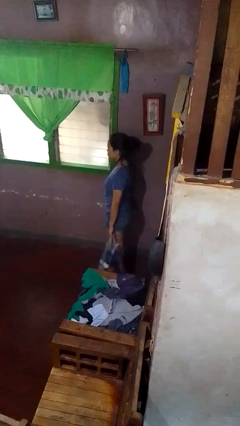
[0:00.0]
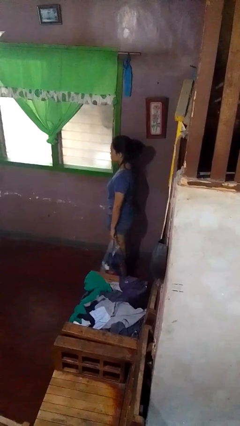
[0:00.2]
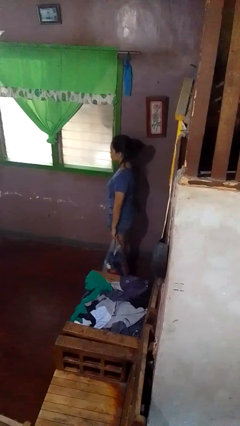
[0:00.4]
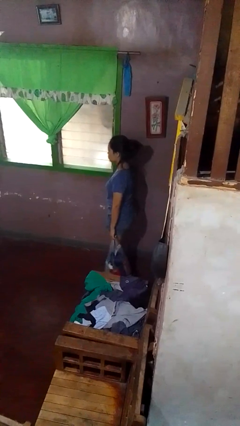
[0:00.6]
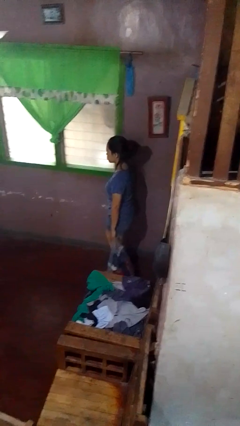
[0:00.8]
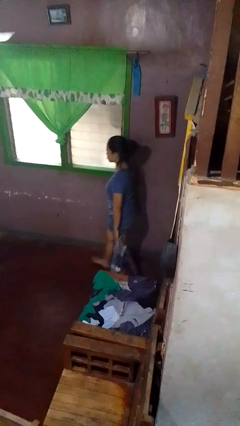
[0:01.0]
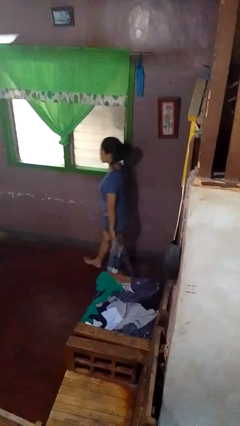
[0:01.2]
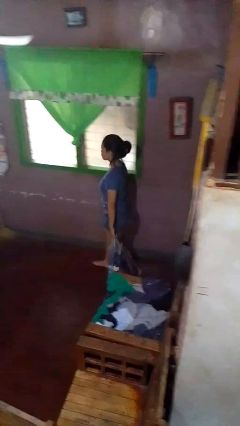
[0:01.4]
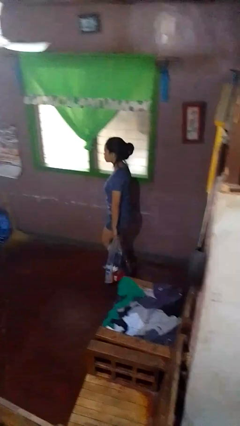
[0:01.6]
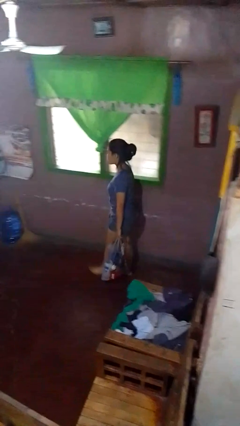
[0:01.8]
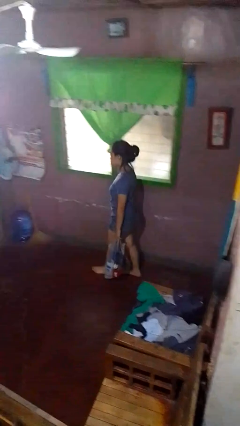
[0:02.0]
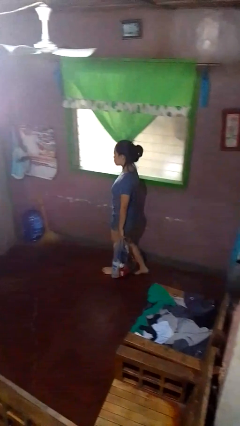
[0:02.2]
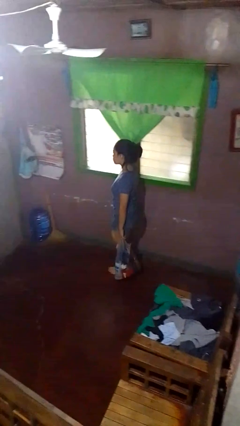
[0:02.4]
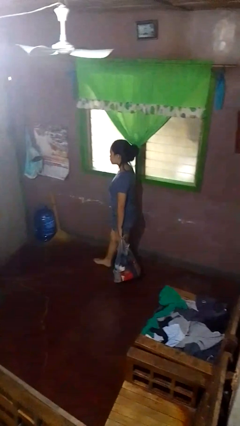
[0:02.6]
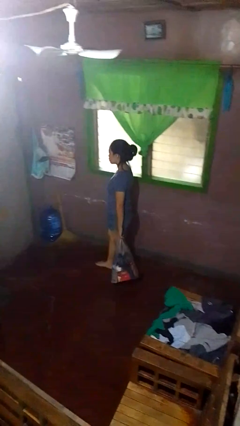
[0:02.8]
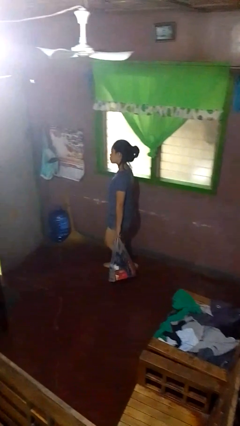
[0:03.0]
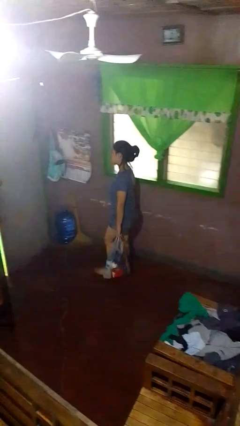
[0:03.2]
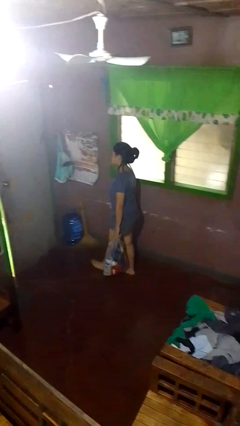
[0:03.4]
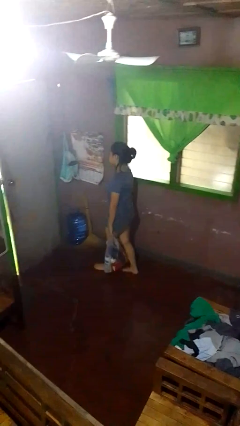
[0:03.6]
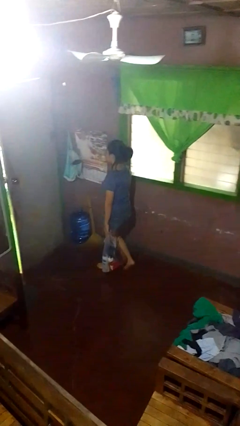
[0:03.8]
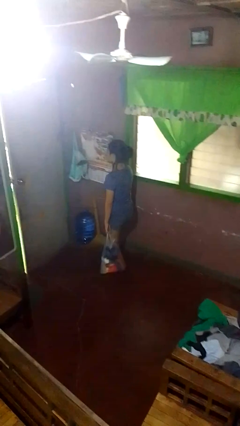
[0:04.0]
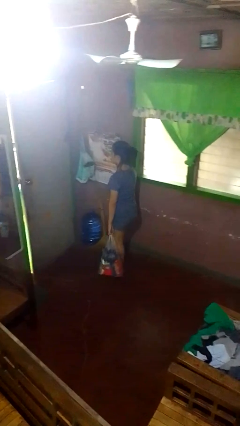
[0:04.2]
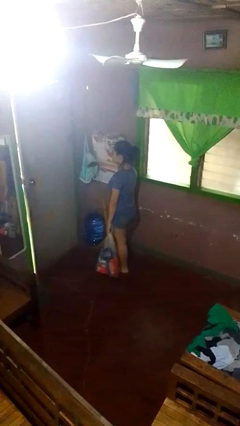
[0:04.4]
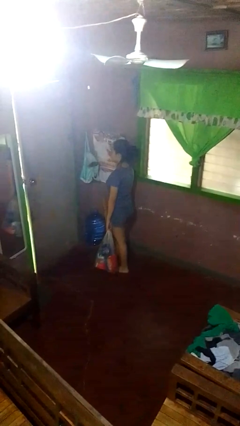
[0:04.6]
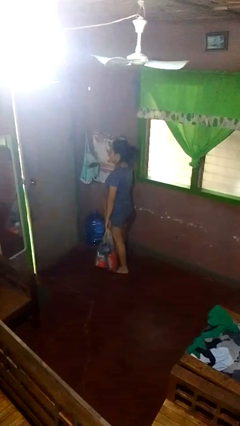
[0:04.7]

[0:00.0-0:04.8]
person carries groceries

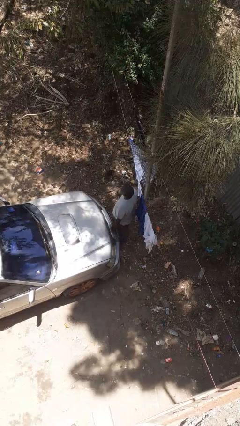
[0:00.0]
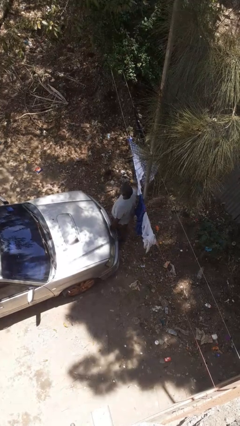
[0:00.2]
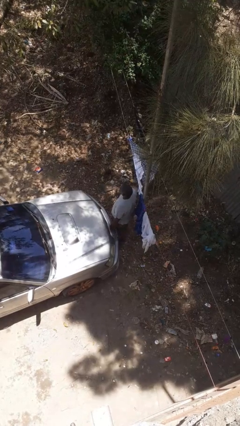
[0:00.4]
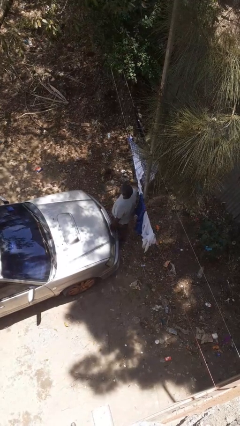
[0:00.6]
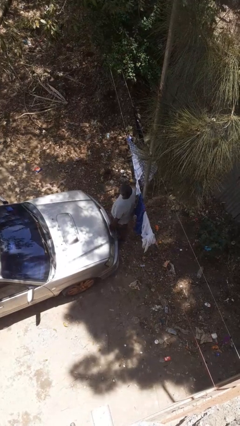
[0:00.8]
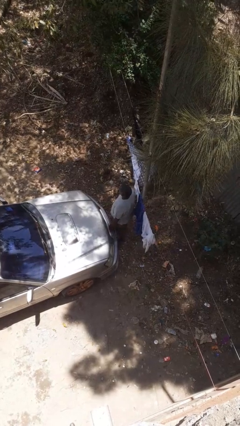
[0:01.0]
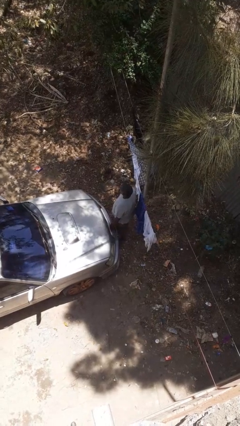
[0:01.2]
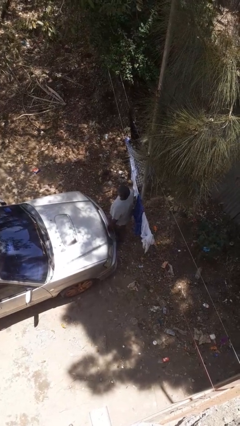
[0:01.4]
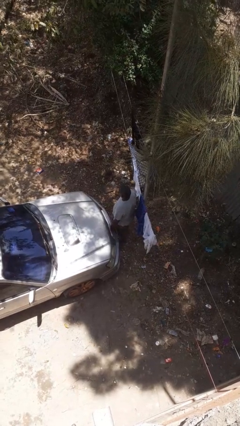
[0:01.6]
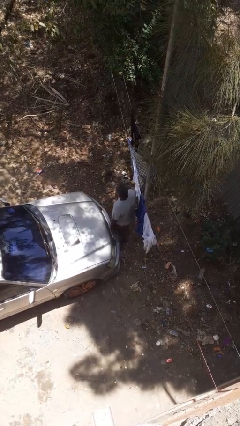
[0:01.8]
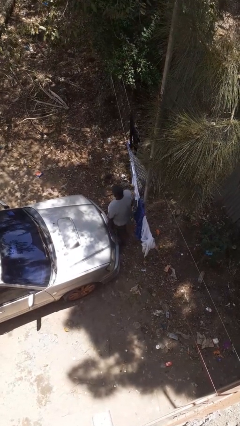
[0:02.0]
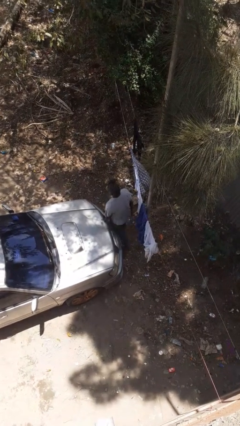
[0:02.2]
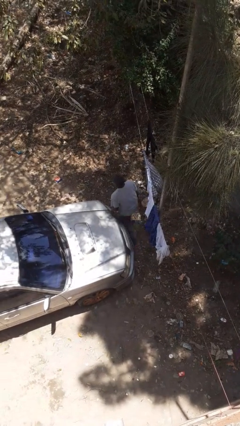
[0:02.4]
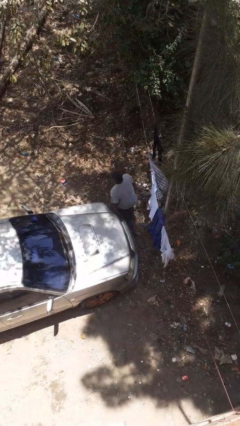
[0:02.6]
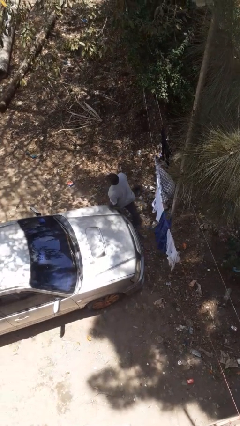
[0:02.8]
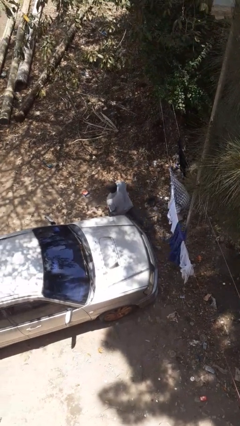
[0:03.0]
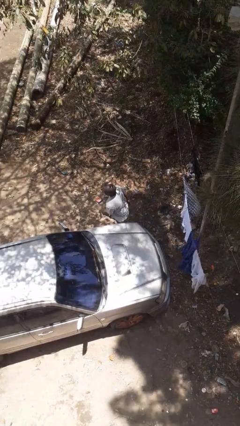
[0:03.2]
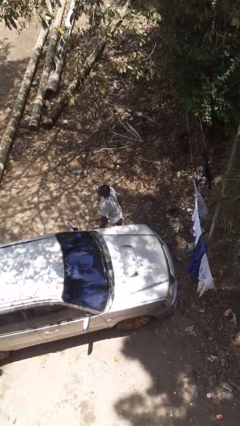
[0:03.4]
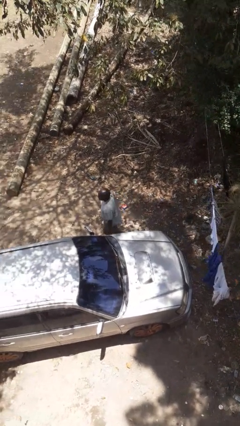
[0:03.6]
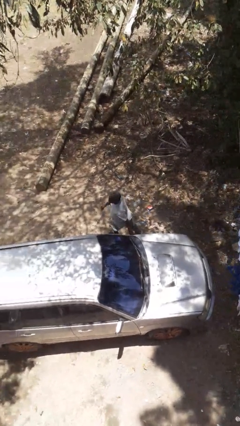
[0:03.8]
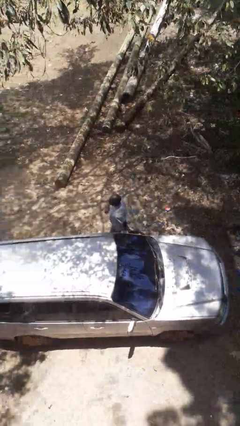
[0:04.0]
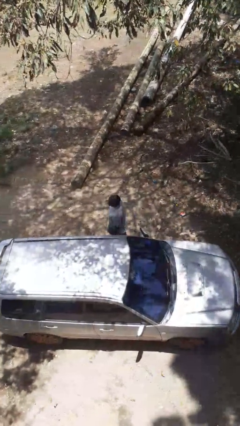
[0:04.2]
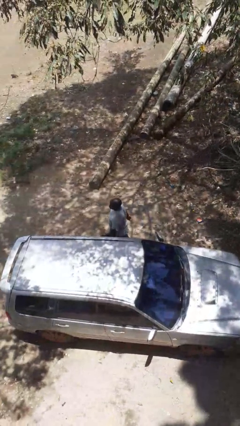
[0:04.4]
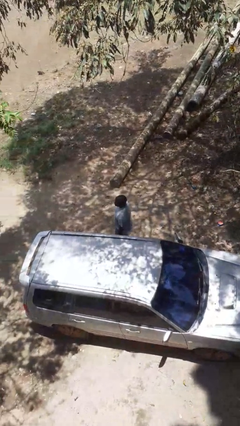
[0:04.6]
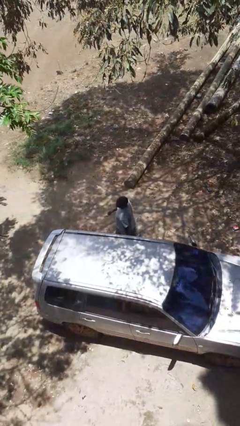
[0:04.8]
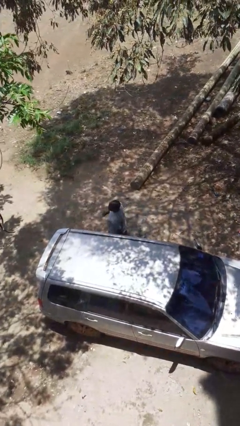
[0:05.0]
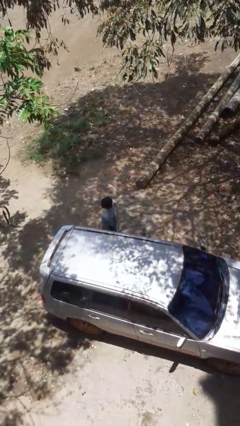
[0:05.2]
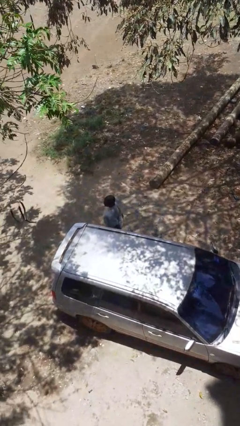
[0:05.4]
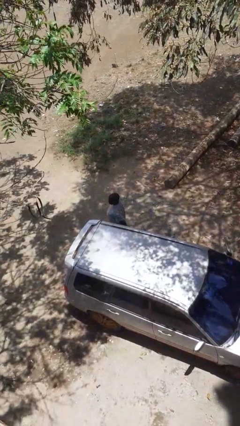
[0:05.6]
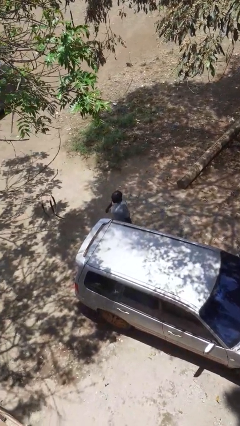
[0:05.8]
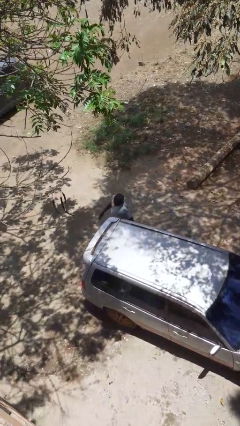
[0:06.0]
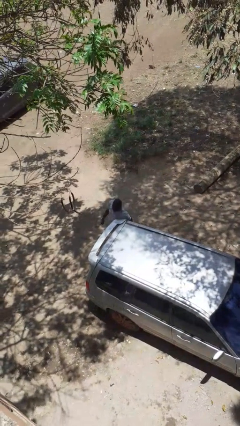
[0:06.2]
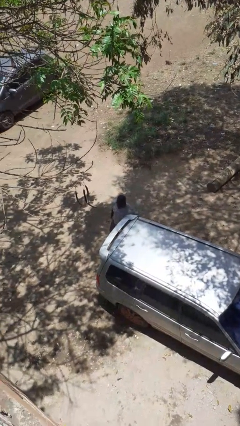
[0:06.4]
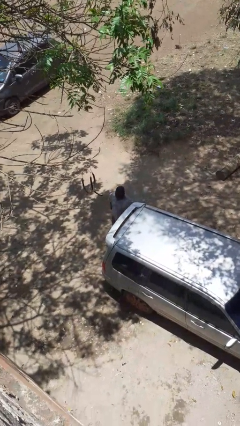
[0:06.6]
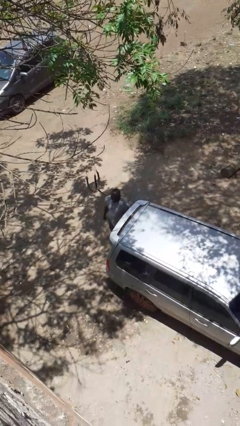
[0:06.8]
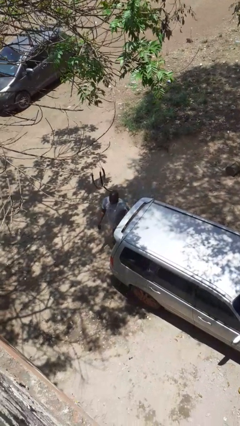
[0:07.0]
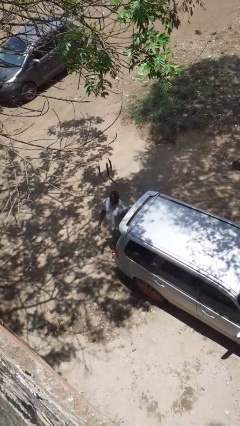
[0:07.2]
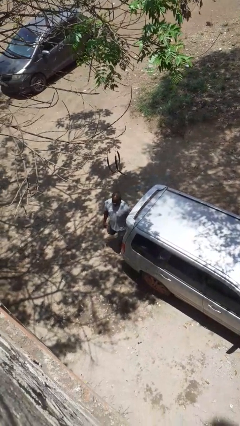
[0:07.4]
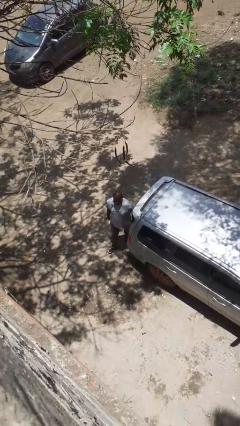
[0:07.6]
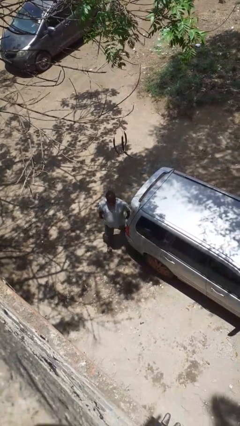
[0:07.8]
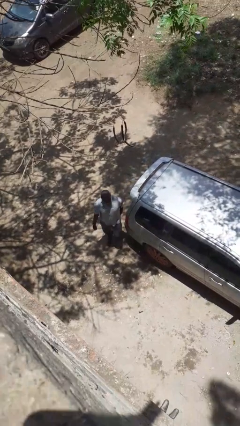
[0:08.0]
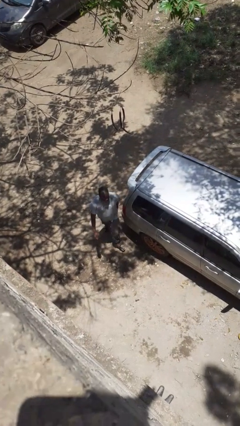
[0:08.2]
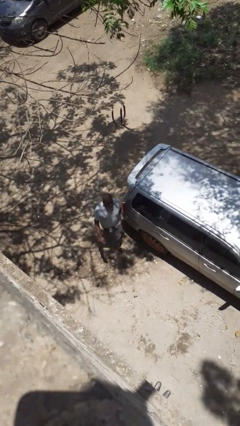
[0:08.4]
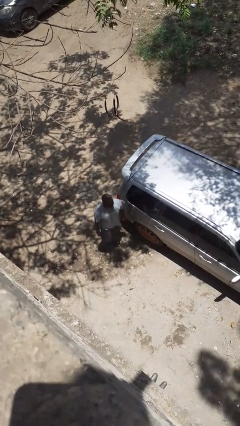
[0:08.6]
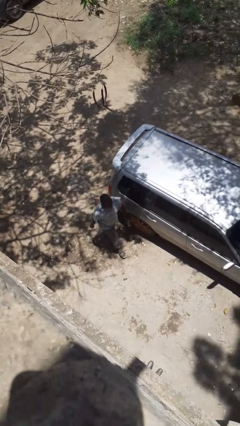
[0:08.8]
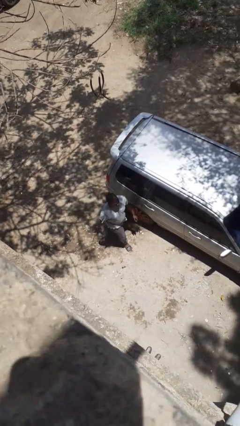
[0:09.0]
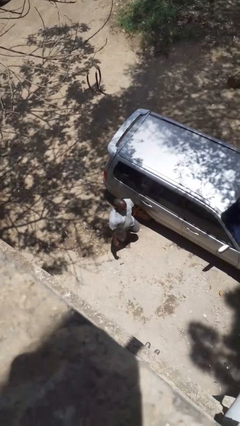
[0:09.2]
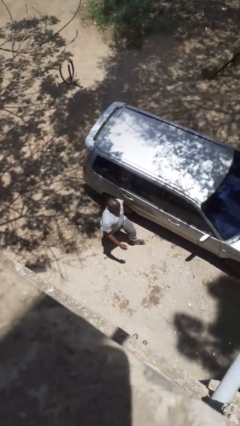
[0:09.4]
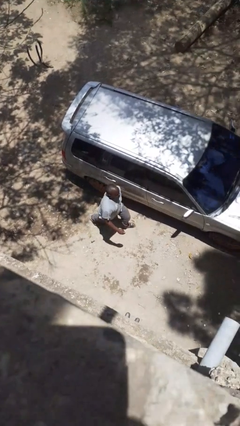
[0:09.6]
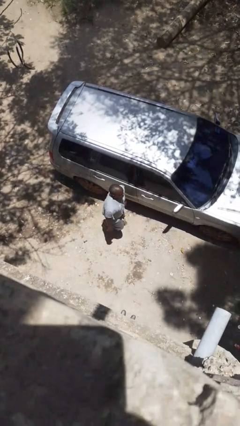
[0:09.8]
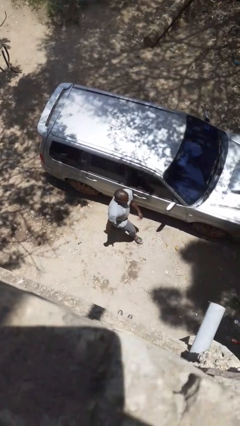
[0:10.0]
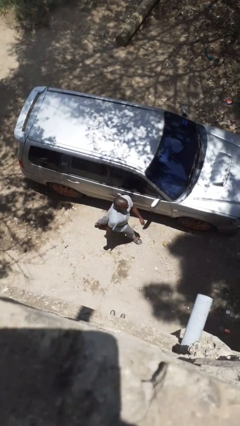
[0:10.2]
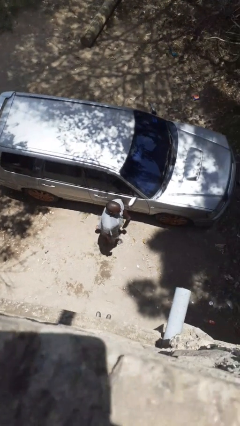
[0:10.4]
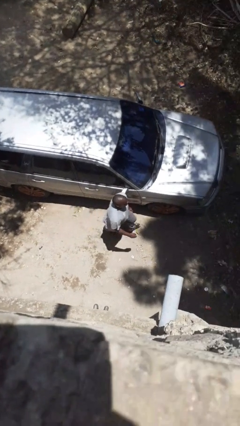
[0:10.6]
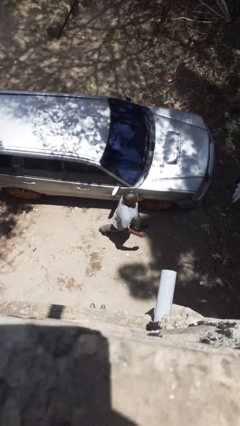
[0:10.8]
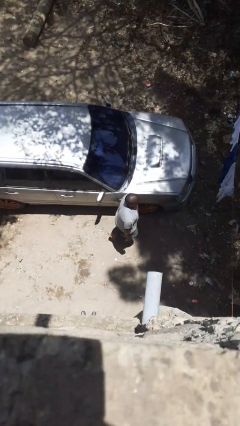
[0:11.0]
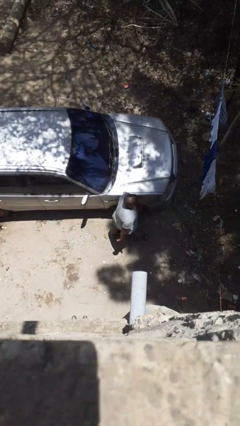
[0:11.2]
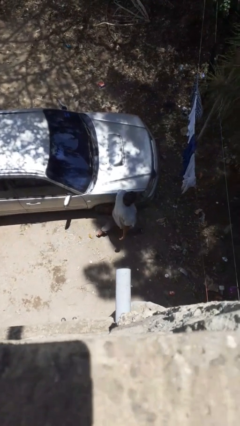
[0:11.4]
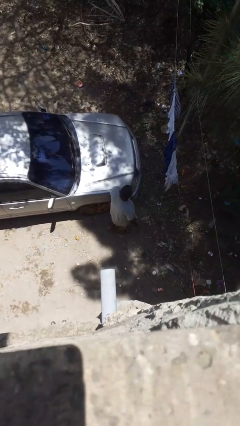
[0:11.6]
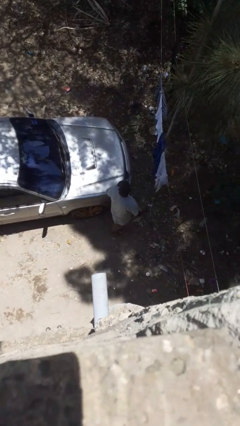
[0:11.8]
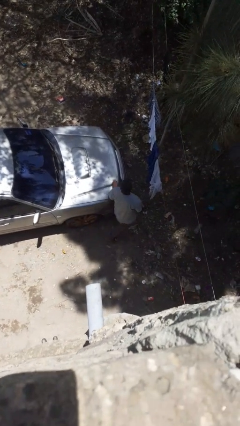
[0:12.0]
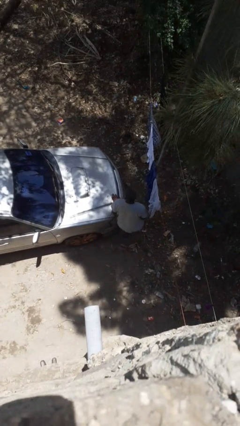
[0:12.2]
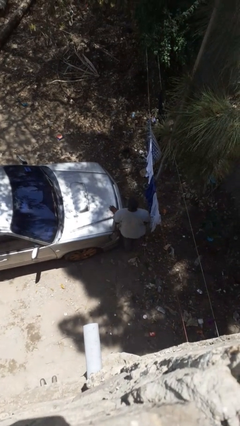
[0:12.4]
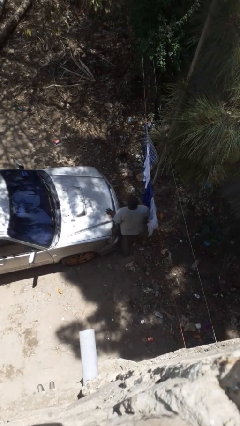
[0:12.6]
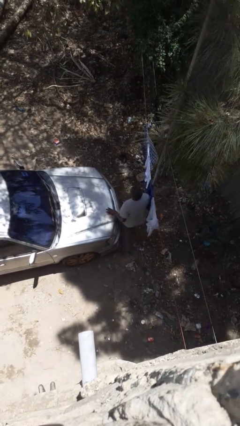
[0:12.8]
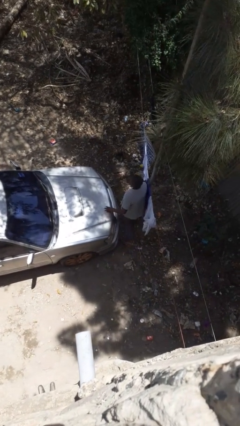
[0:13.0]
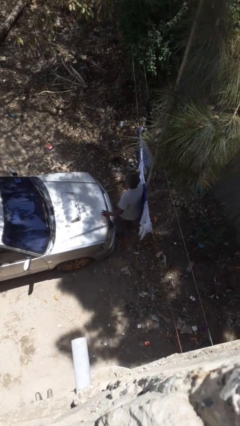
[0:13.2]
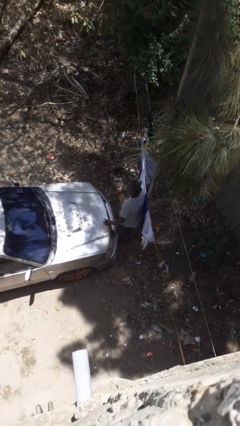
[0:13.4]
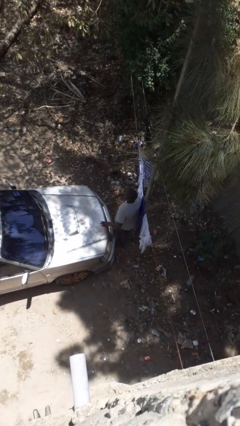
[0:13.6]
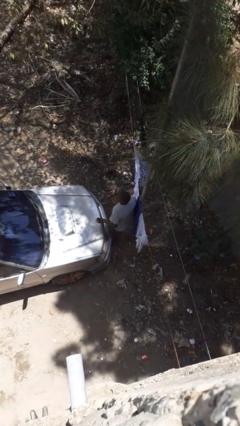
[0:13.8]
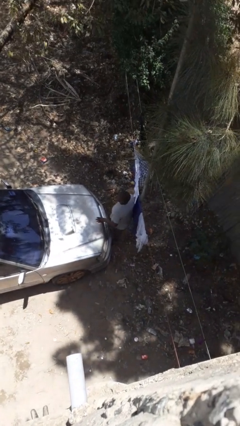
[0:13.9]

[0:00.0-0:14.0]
person walks around car
